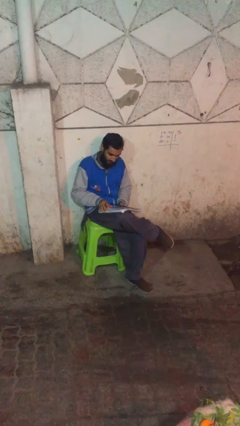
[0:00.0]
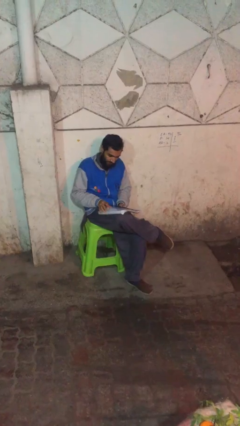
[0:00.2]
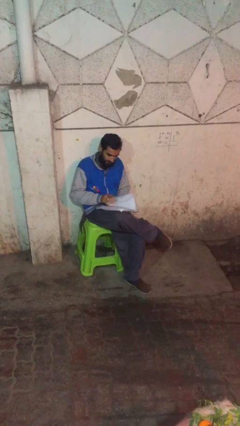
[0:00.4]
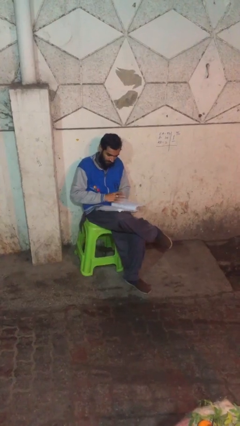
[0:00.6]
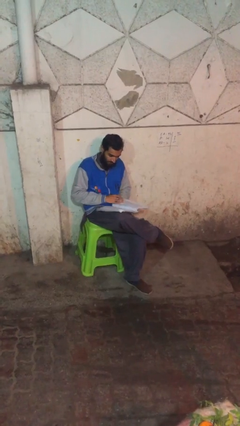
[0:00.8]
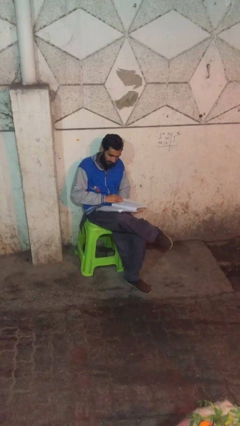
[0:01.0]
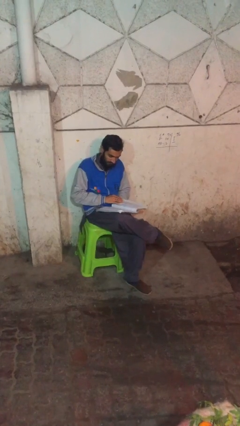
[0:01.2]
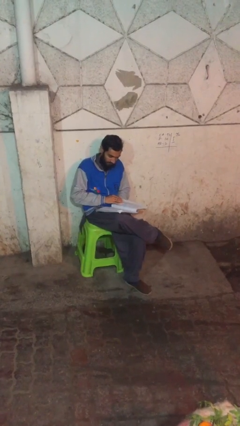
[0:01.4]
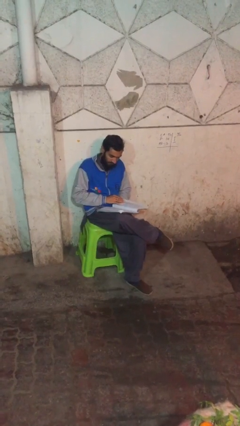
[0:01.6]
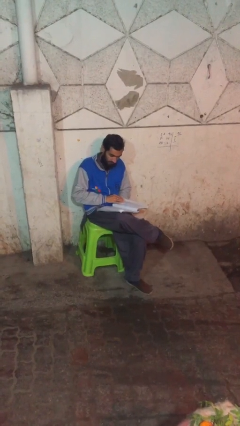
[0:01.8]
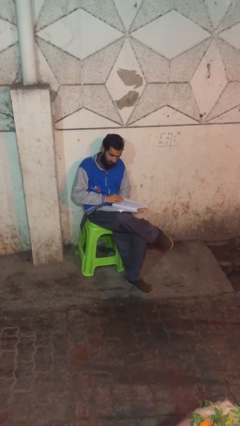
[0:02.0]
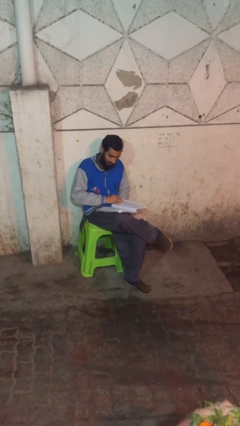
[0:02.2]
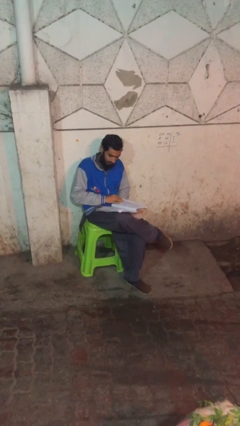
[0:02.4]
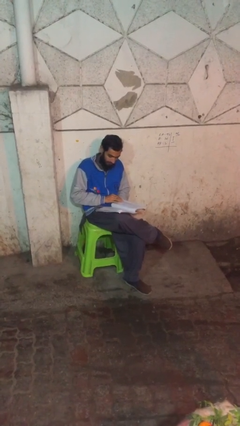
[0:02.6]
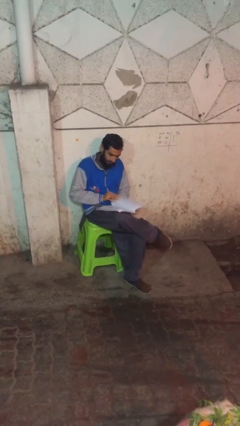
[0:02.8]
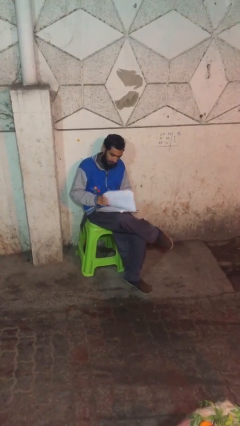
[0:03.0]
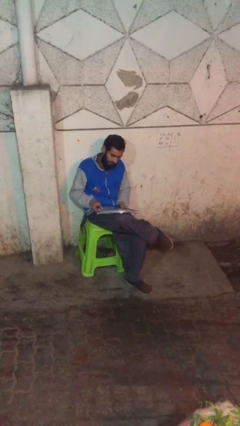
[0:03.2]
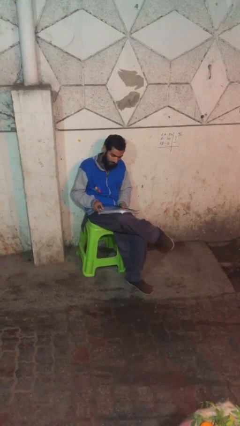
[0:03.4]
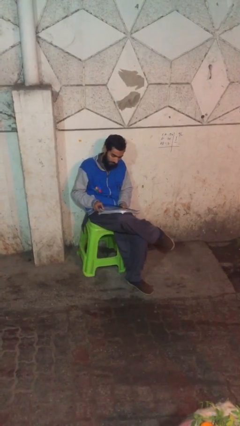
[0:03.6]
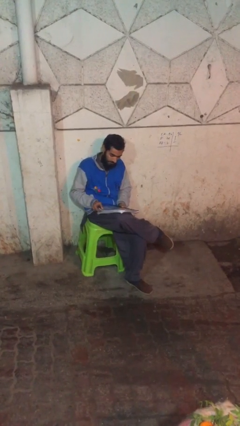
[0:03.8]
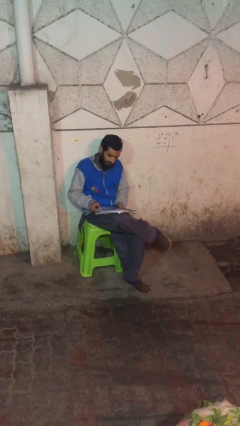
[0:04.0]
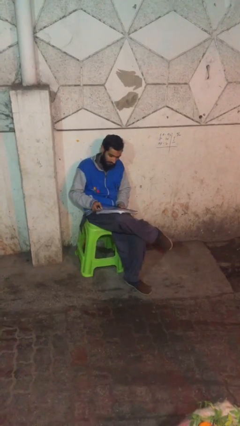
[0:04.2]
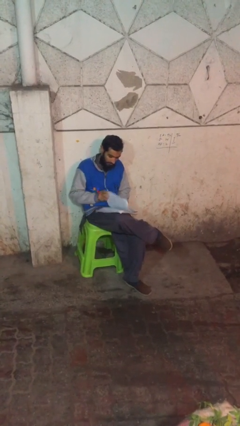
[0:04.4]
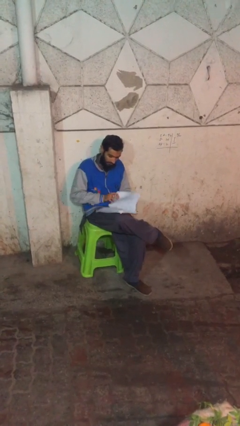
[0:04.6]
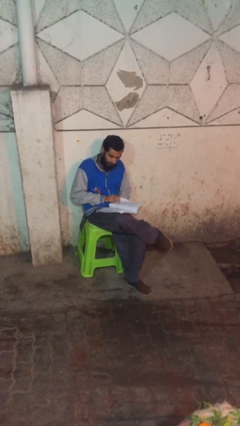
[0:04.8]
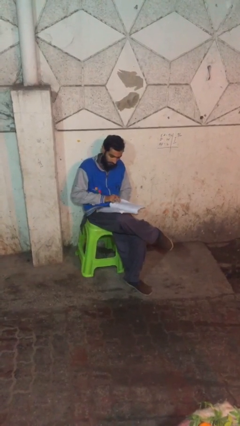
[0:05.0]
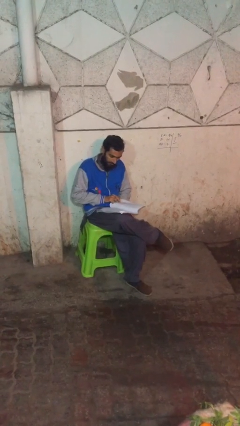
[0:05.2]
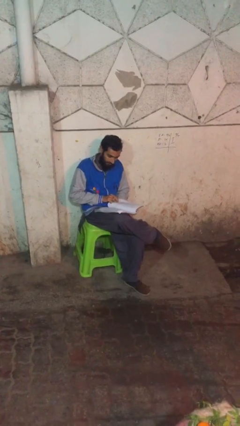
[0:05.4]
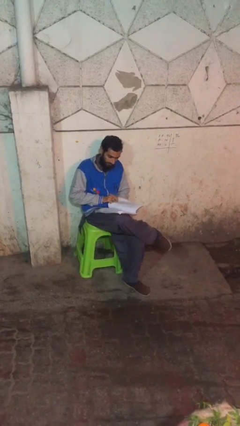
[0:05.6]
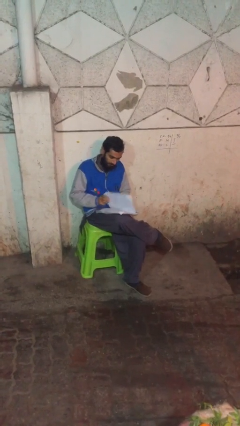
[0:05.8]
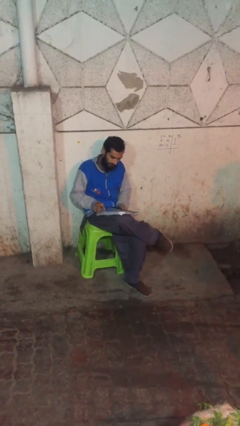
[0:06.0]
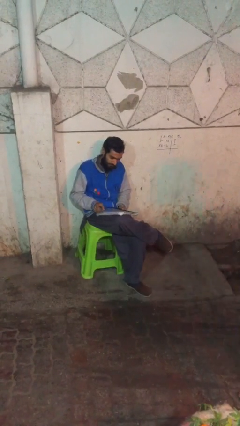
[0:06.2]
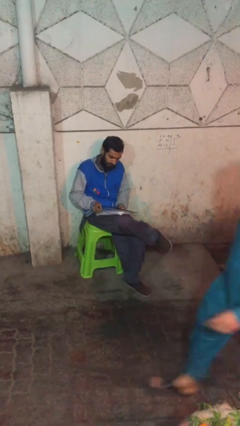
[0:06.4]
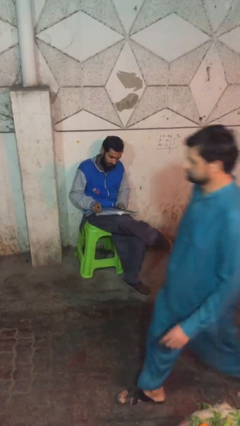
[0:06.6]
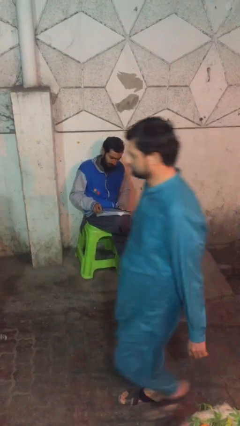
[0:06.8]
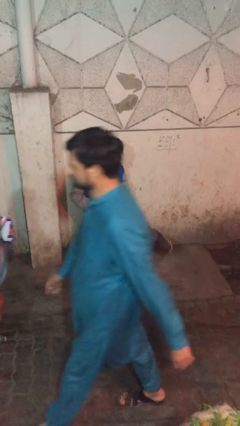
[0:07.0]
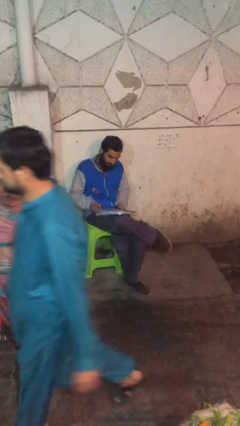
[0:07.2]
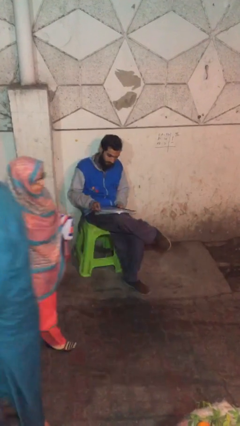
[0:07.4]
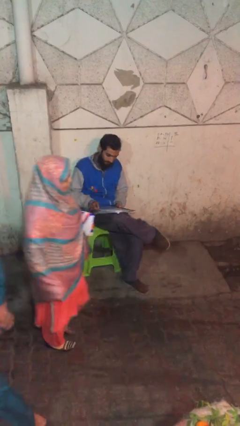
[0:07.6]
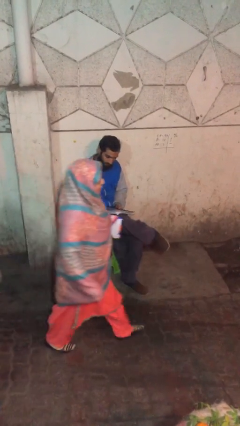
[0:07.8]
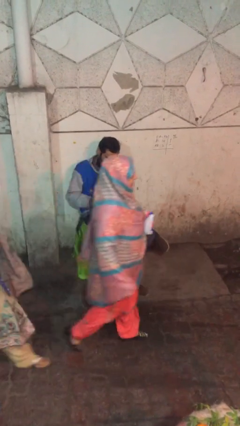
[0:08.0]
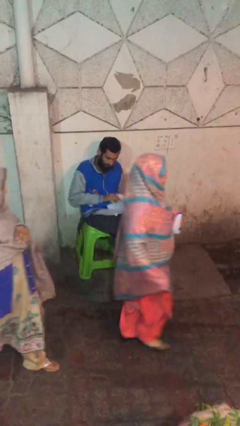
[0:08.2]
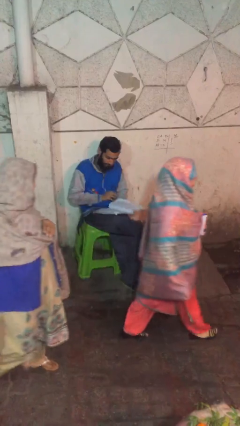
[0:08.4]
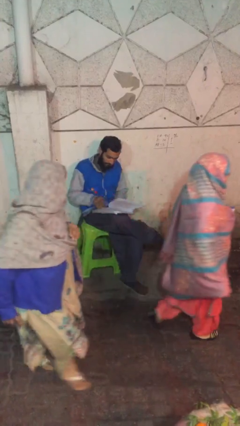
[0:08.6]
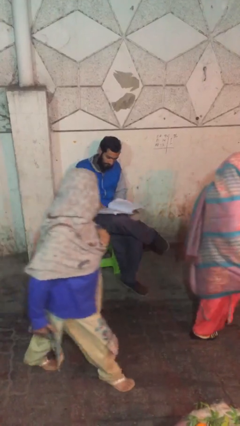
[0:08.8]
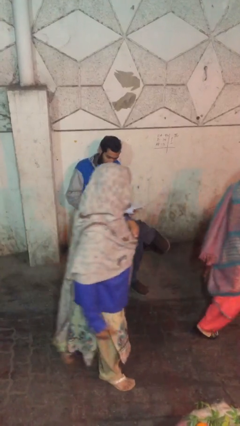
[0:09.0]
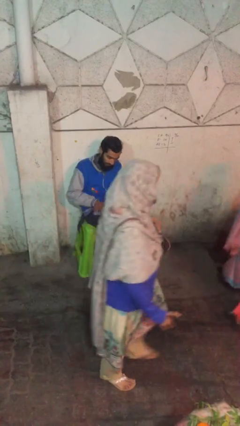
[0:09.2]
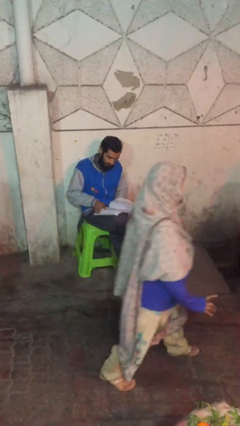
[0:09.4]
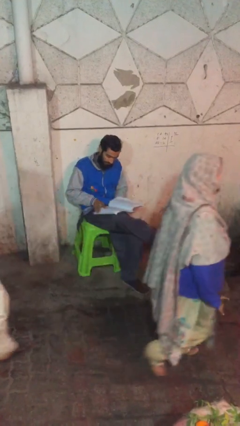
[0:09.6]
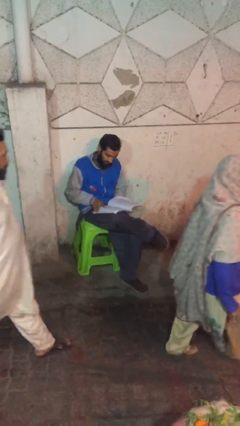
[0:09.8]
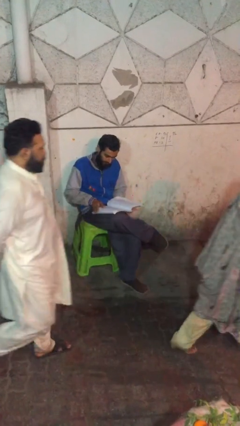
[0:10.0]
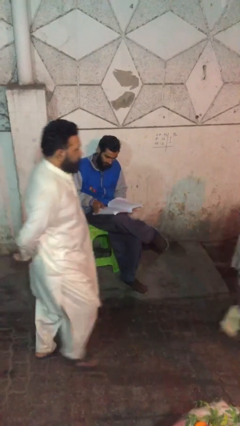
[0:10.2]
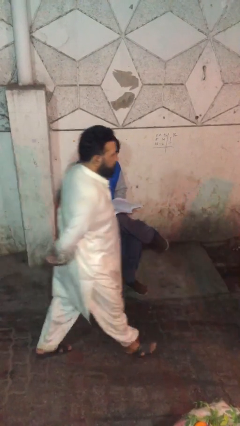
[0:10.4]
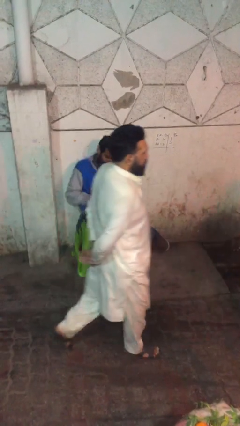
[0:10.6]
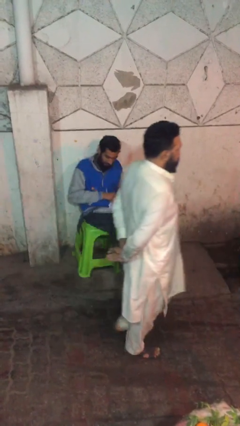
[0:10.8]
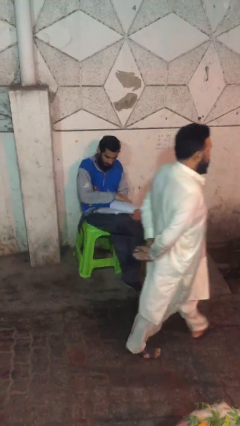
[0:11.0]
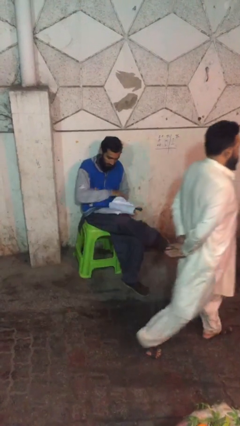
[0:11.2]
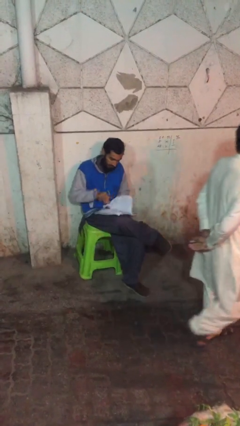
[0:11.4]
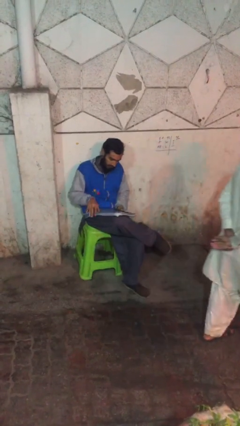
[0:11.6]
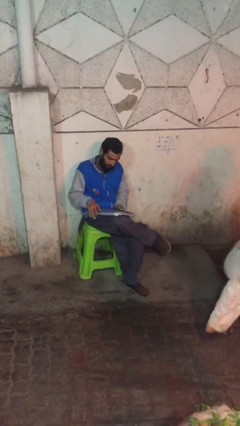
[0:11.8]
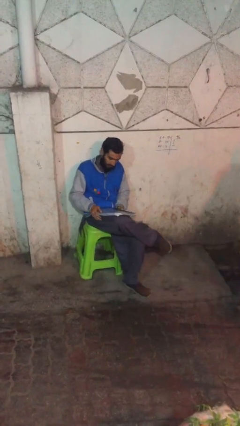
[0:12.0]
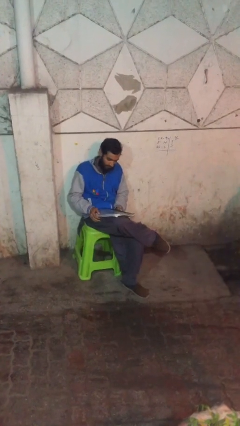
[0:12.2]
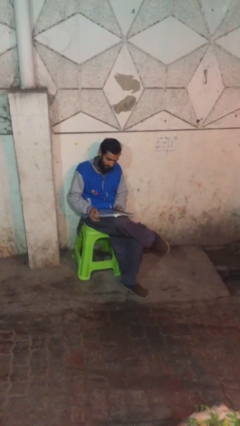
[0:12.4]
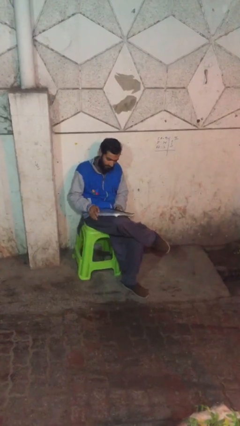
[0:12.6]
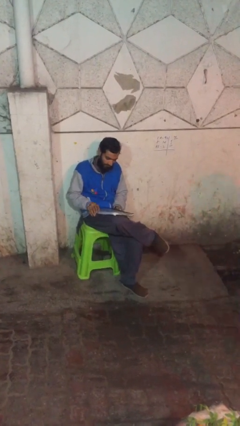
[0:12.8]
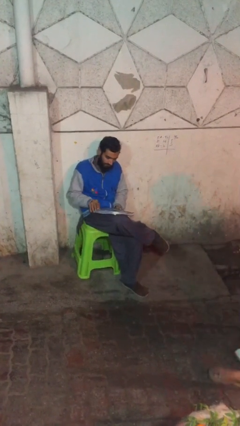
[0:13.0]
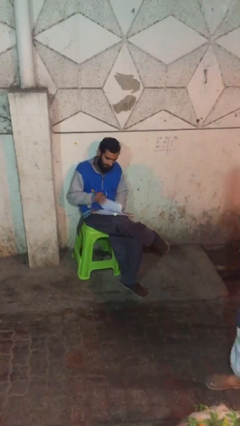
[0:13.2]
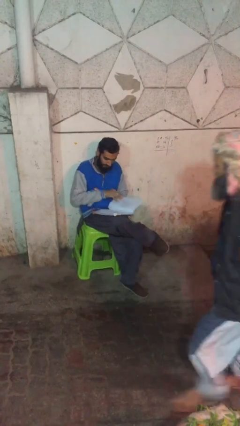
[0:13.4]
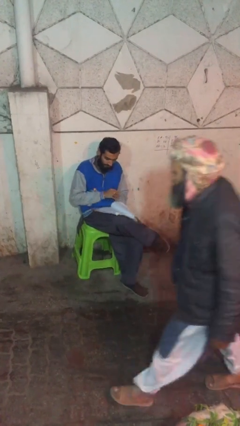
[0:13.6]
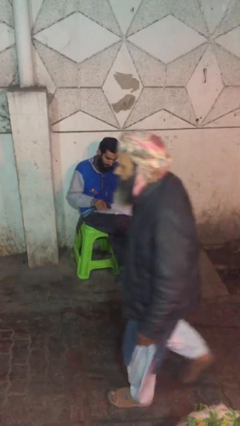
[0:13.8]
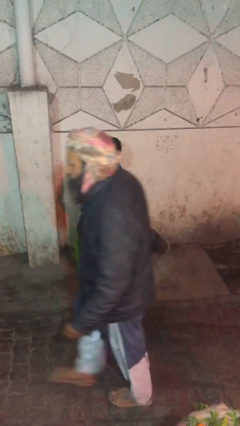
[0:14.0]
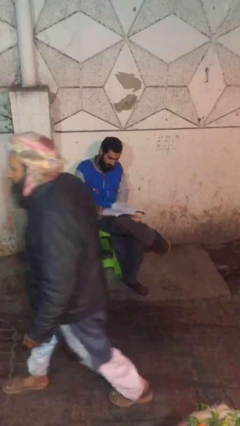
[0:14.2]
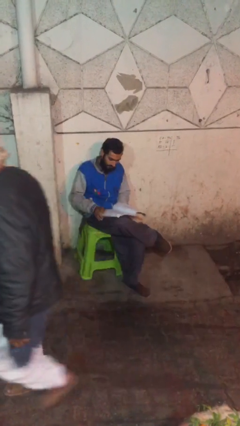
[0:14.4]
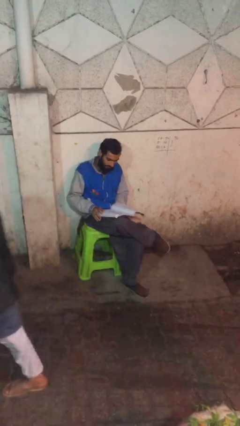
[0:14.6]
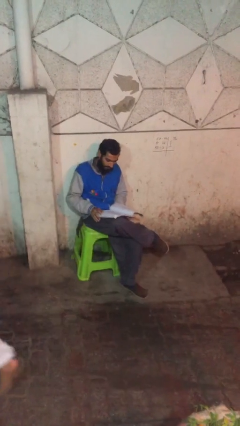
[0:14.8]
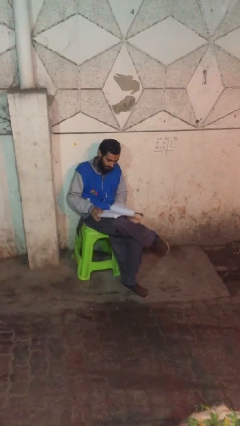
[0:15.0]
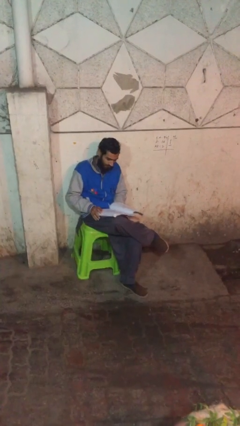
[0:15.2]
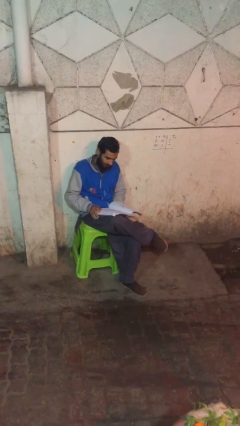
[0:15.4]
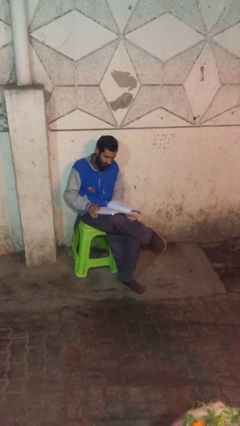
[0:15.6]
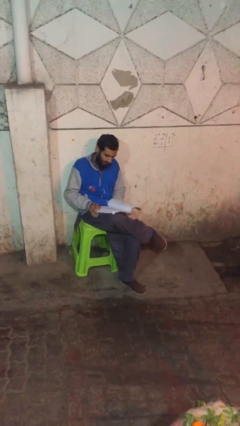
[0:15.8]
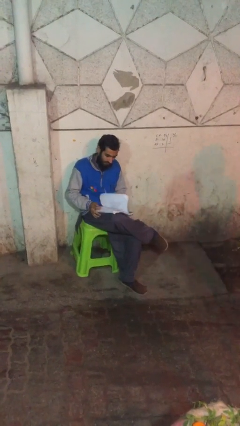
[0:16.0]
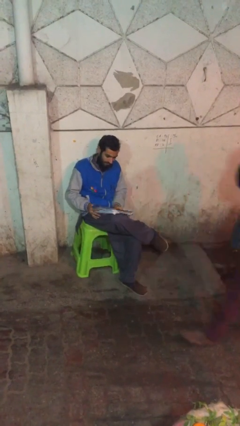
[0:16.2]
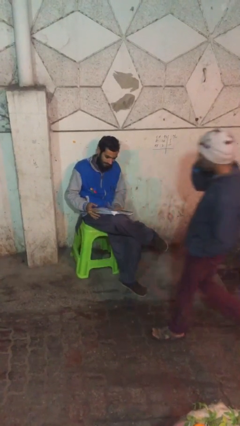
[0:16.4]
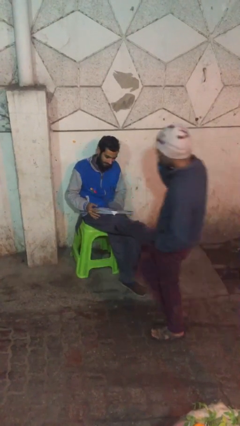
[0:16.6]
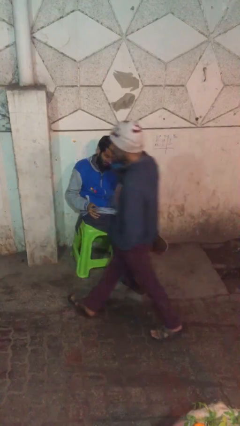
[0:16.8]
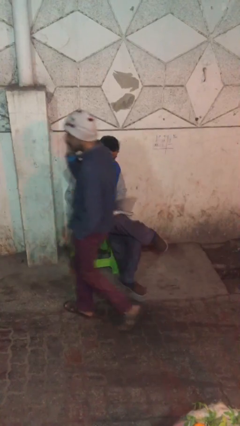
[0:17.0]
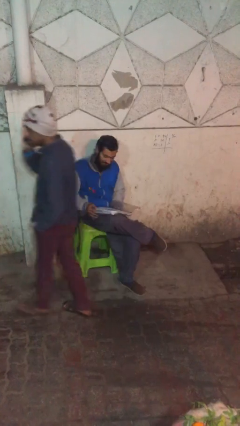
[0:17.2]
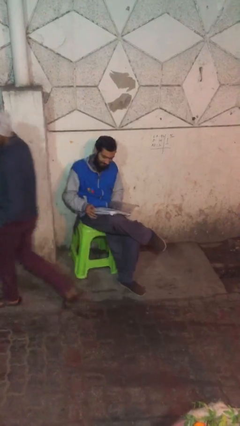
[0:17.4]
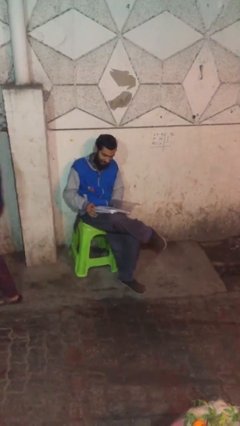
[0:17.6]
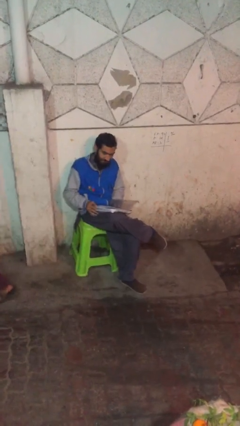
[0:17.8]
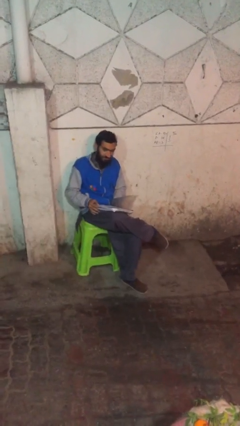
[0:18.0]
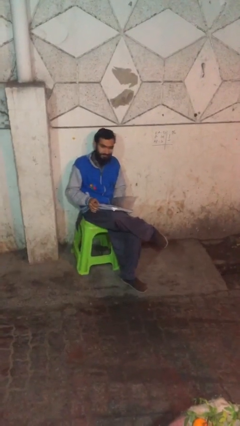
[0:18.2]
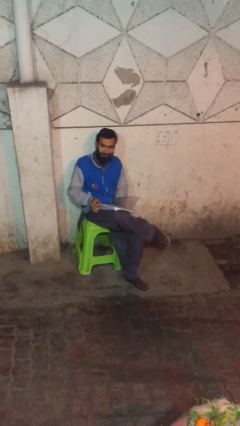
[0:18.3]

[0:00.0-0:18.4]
person reads document
